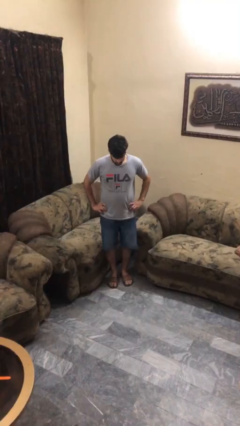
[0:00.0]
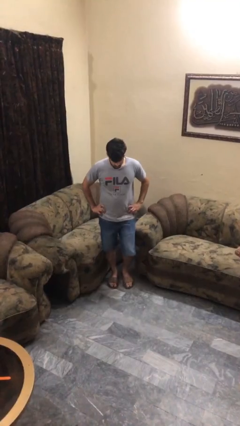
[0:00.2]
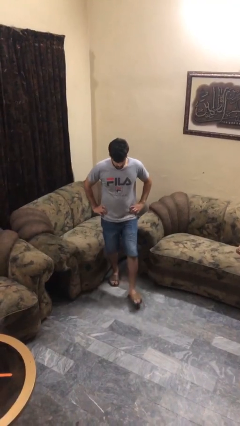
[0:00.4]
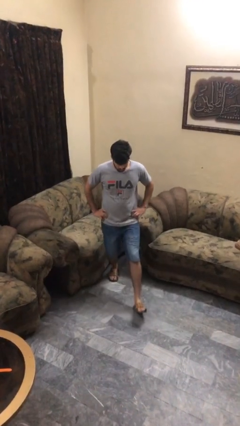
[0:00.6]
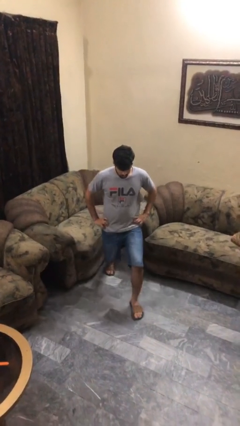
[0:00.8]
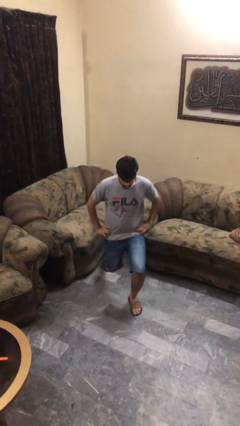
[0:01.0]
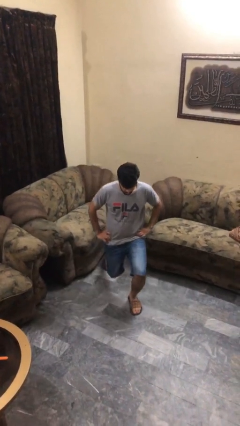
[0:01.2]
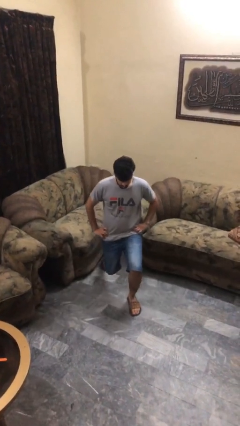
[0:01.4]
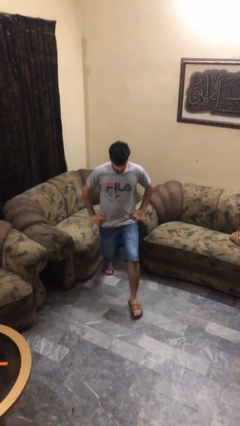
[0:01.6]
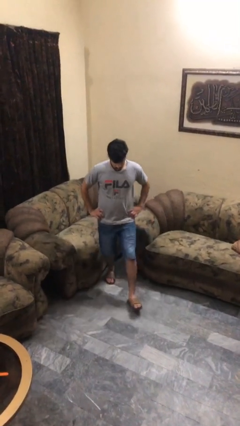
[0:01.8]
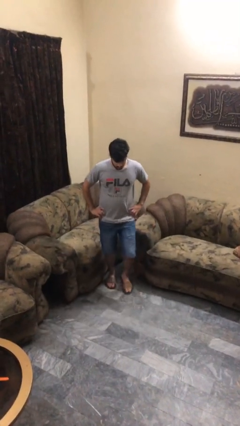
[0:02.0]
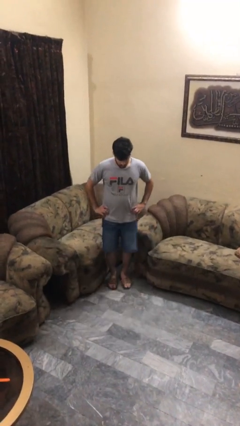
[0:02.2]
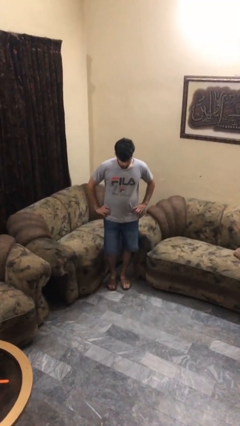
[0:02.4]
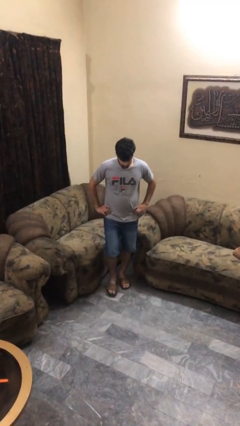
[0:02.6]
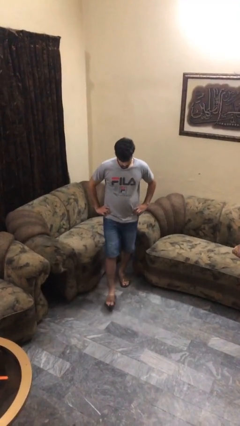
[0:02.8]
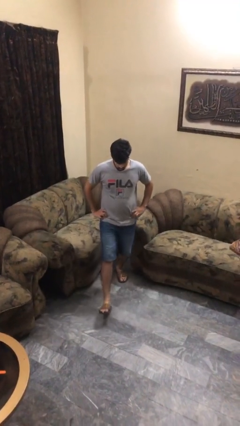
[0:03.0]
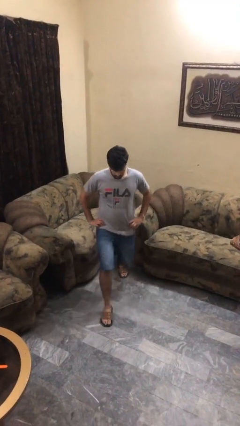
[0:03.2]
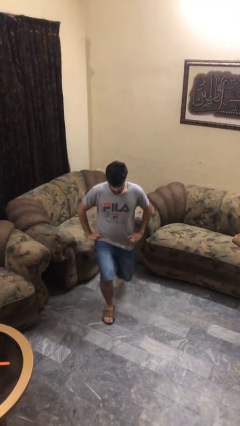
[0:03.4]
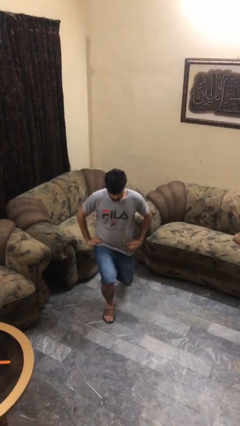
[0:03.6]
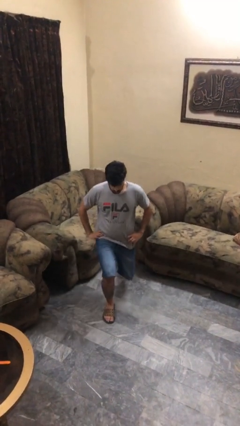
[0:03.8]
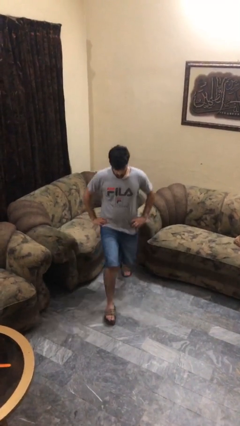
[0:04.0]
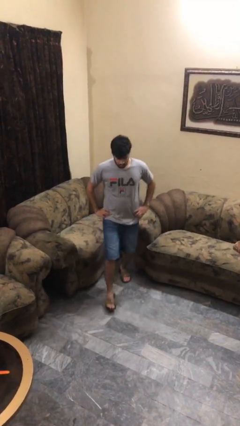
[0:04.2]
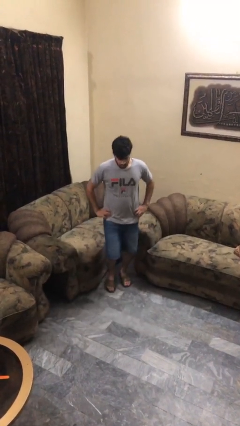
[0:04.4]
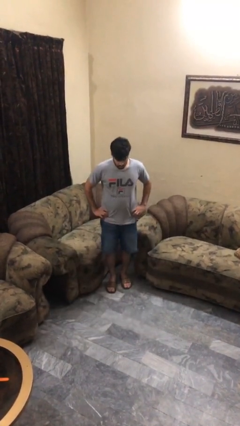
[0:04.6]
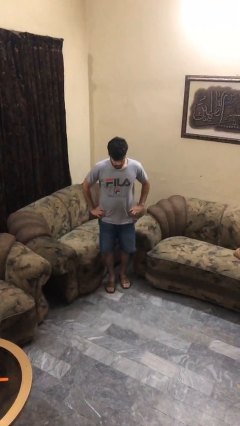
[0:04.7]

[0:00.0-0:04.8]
person exercises with lunges

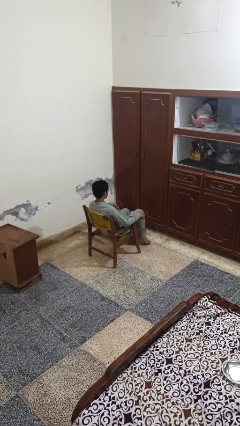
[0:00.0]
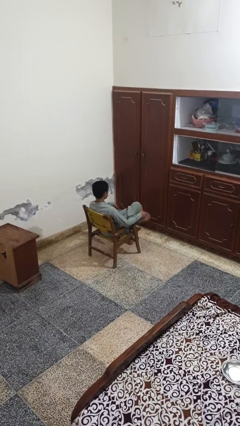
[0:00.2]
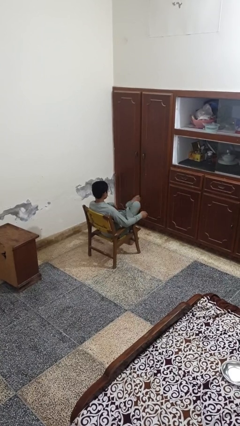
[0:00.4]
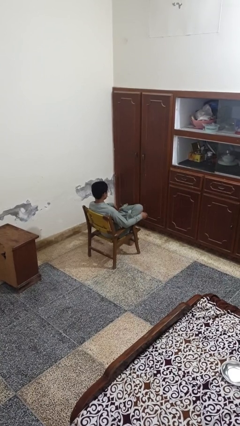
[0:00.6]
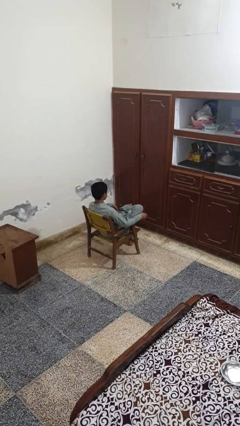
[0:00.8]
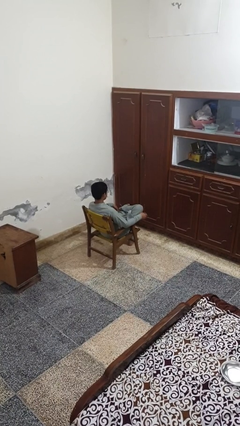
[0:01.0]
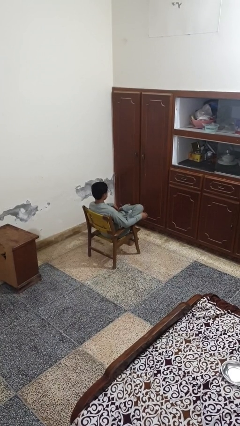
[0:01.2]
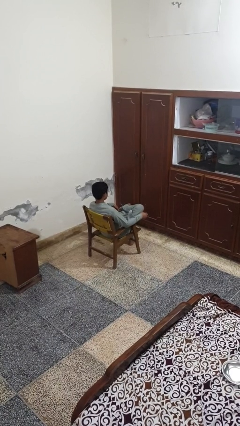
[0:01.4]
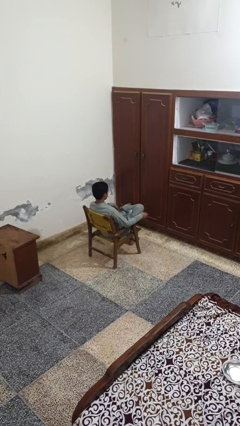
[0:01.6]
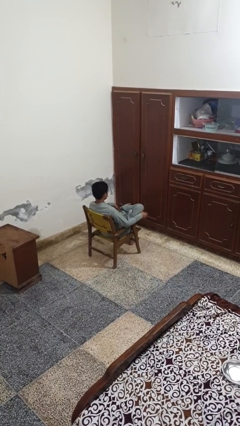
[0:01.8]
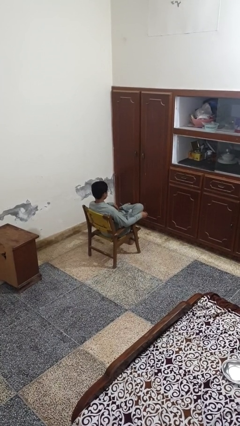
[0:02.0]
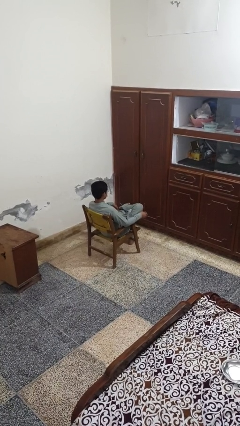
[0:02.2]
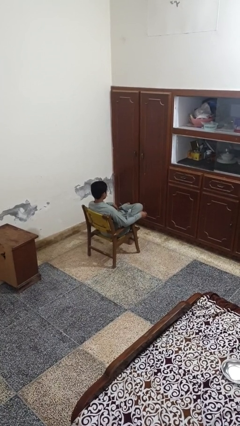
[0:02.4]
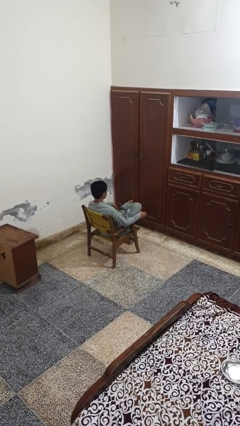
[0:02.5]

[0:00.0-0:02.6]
person crosses legs

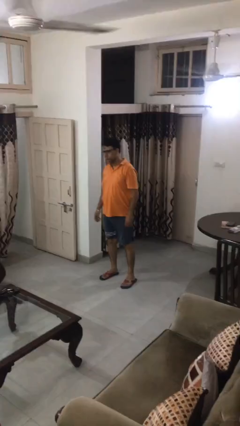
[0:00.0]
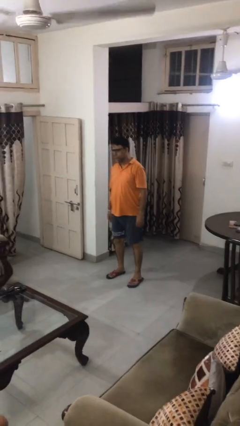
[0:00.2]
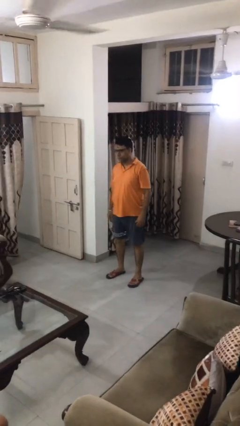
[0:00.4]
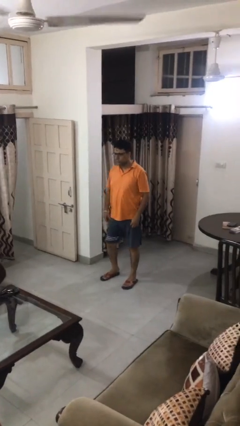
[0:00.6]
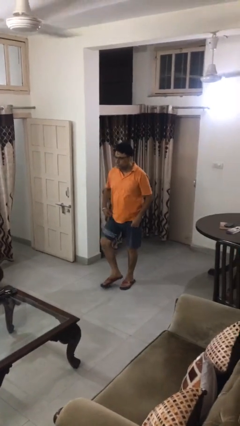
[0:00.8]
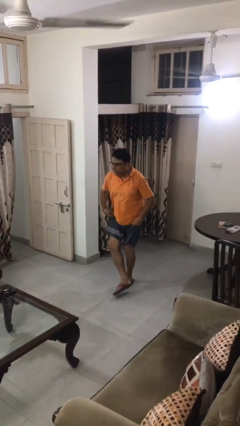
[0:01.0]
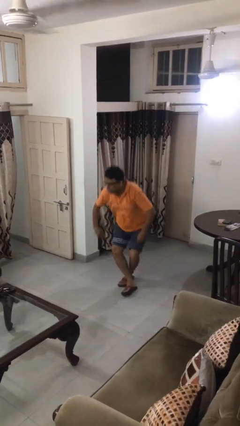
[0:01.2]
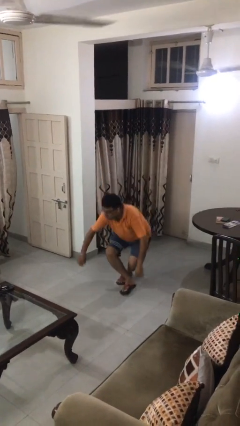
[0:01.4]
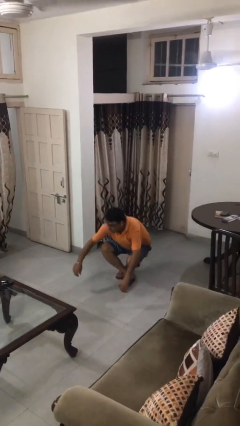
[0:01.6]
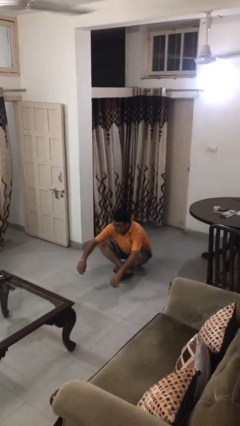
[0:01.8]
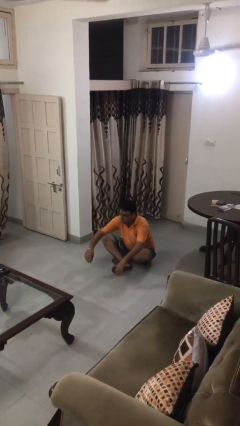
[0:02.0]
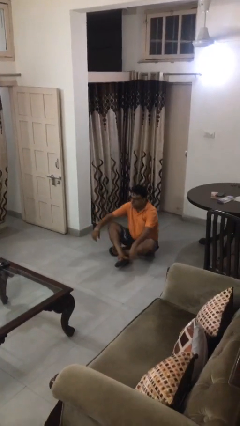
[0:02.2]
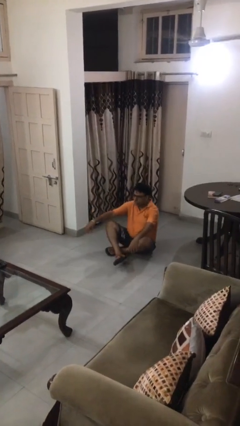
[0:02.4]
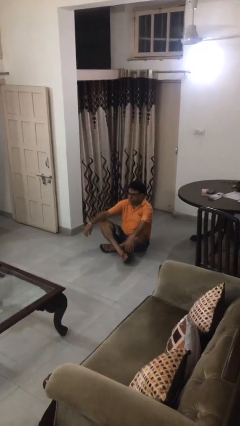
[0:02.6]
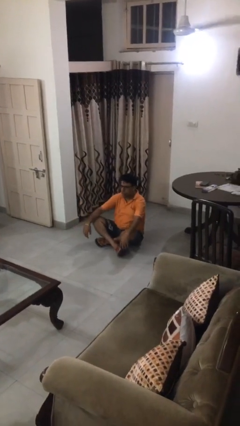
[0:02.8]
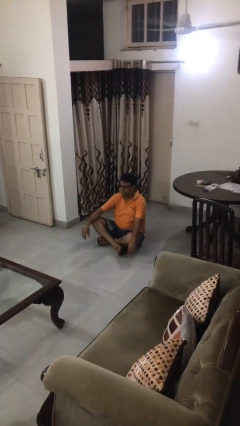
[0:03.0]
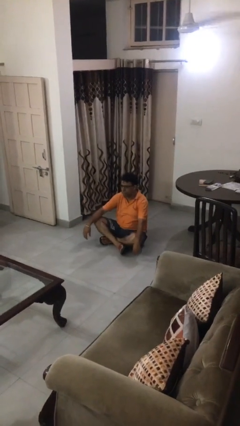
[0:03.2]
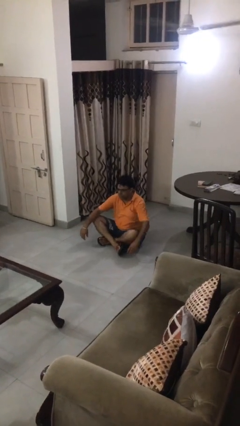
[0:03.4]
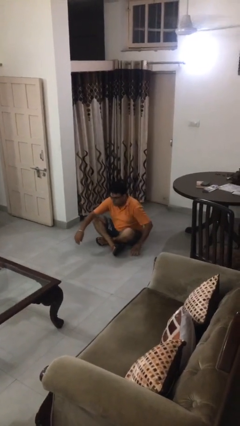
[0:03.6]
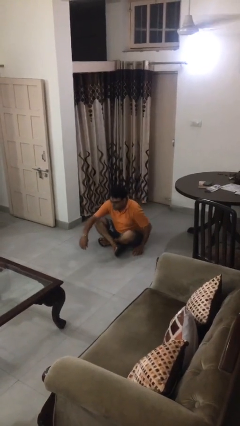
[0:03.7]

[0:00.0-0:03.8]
person sits crisscross

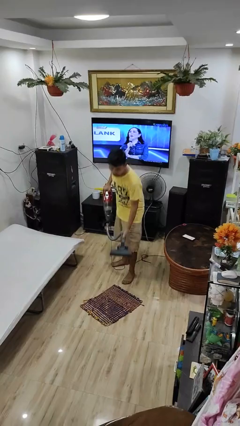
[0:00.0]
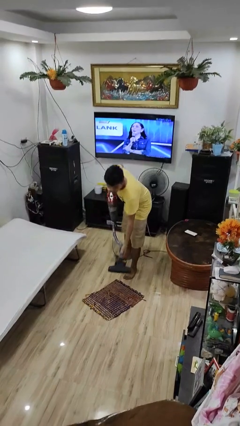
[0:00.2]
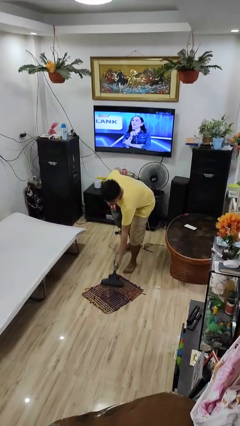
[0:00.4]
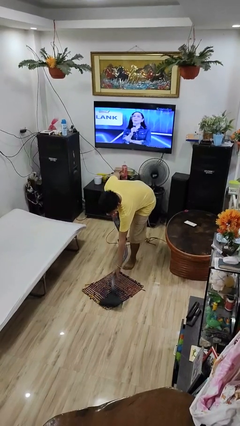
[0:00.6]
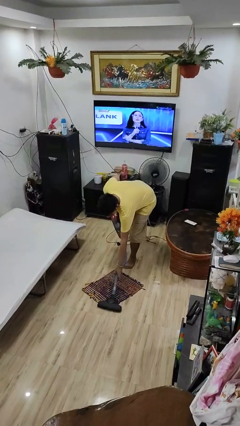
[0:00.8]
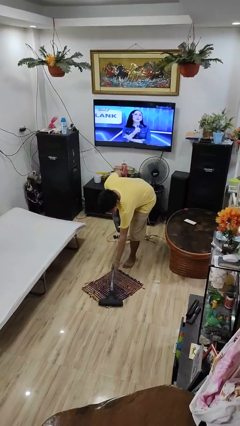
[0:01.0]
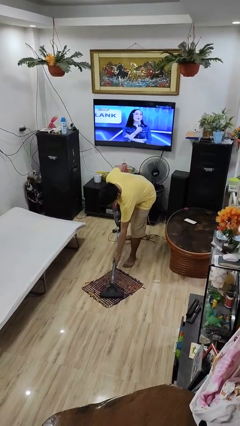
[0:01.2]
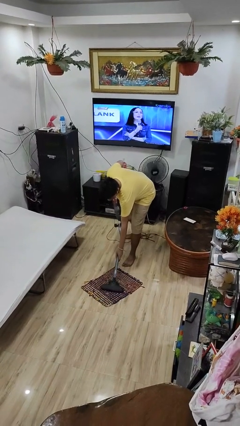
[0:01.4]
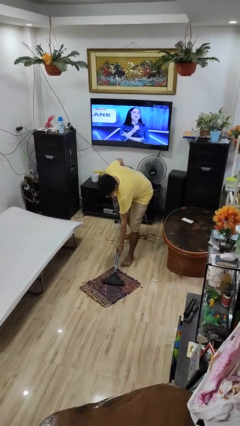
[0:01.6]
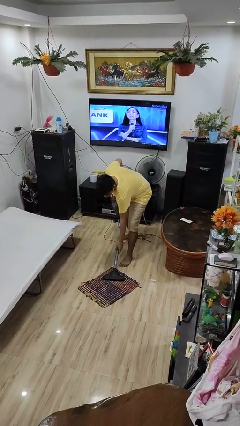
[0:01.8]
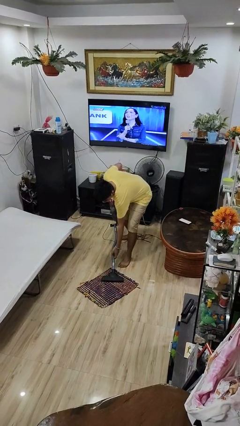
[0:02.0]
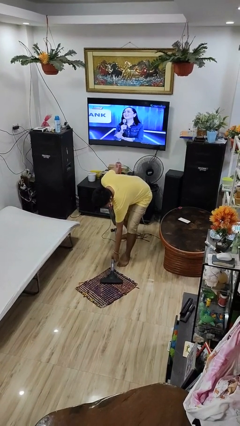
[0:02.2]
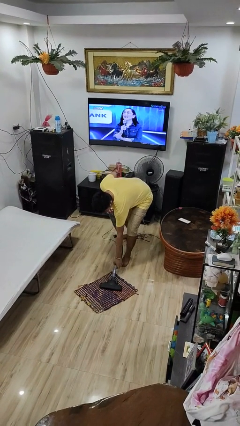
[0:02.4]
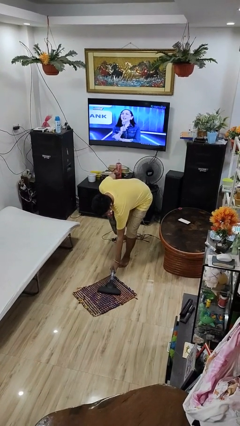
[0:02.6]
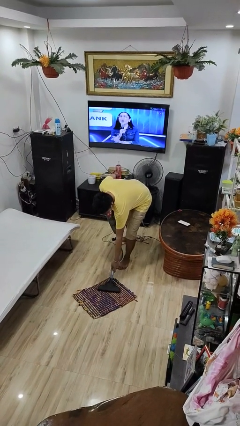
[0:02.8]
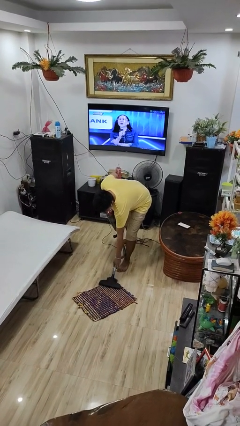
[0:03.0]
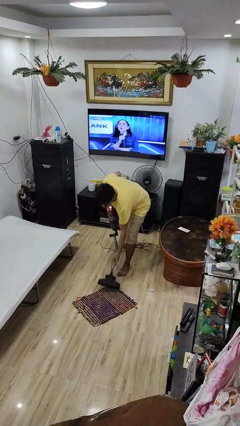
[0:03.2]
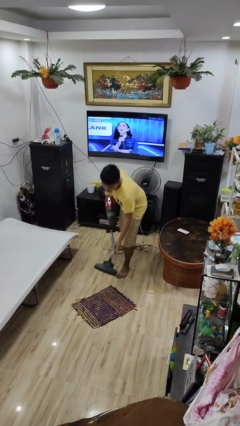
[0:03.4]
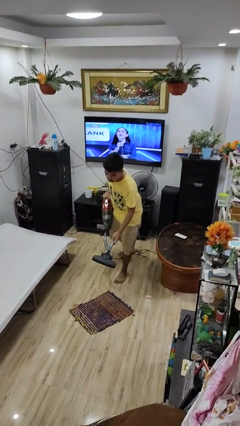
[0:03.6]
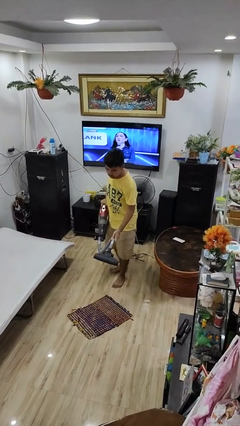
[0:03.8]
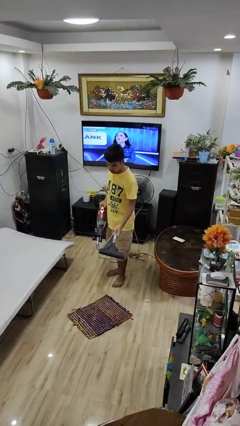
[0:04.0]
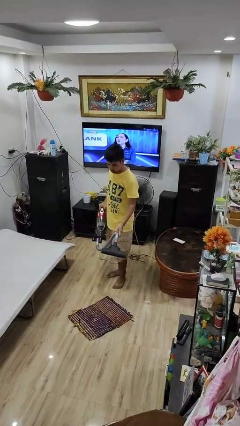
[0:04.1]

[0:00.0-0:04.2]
person vacuums carpet

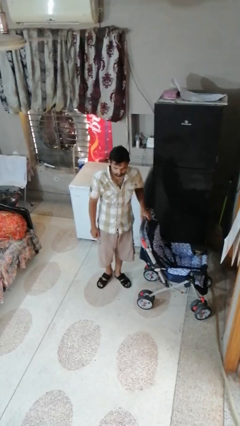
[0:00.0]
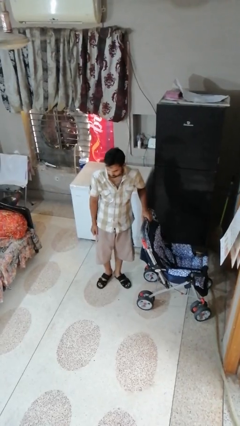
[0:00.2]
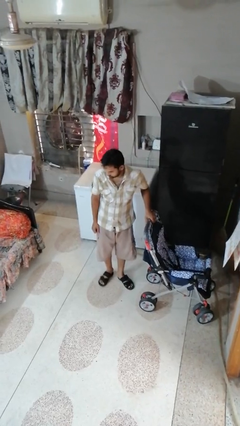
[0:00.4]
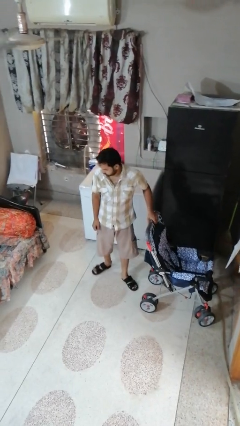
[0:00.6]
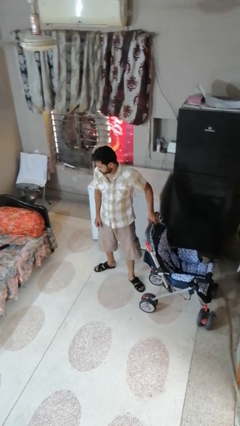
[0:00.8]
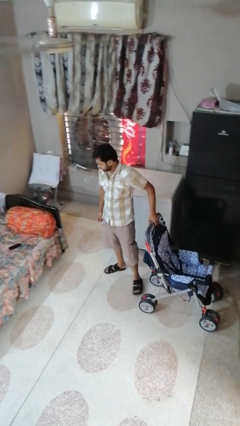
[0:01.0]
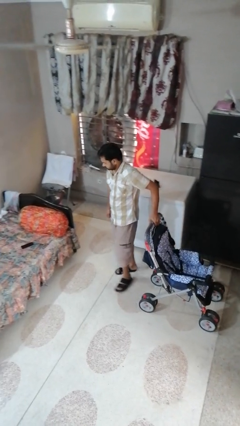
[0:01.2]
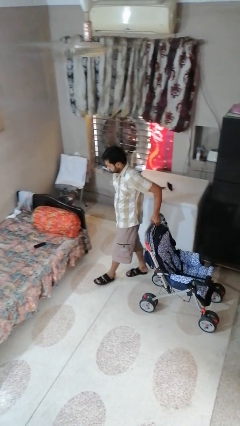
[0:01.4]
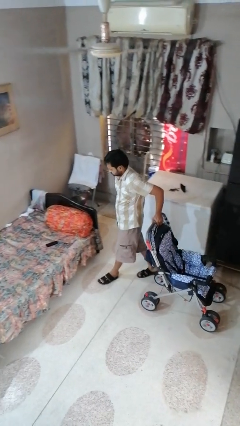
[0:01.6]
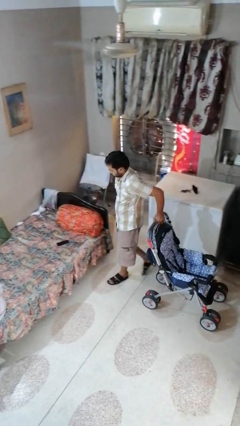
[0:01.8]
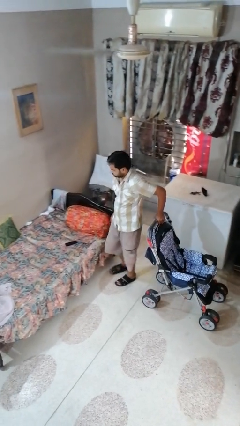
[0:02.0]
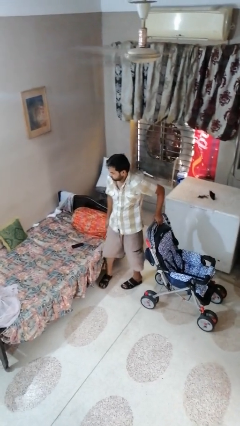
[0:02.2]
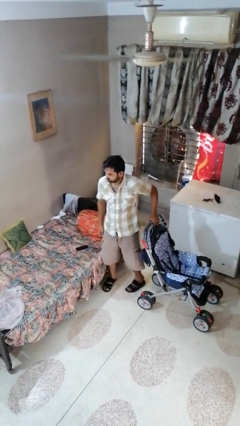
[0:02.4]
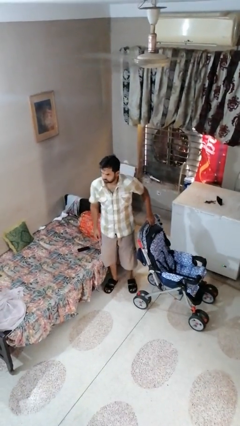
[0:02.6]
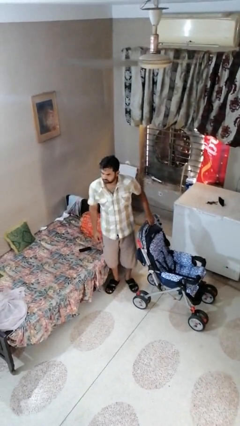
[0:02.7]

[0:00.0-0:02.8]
person pulls wheeled cart
